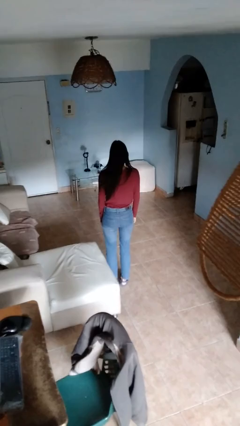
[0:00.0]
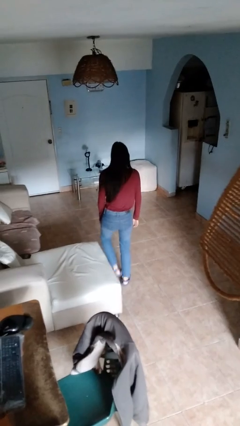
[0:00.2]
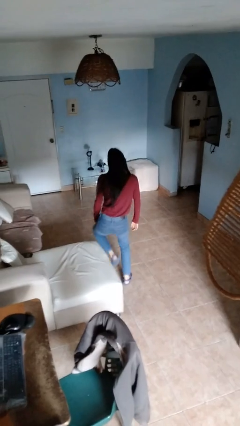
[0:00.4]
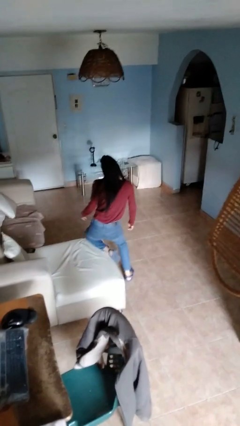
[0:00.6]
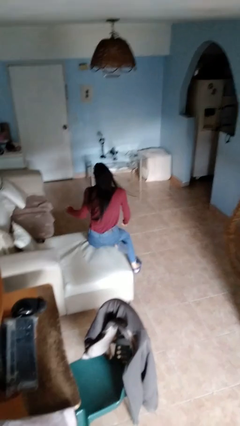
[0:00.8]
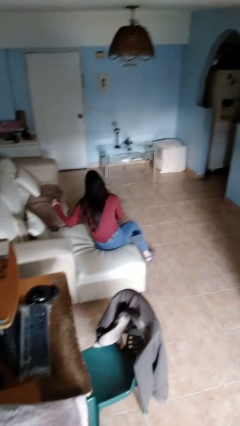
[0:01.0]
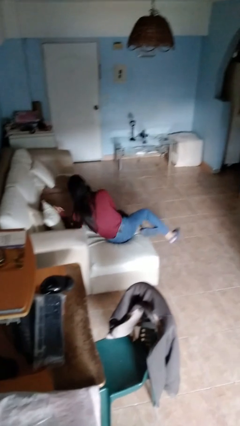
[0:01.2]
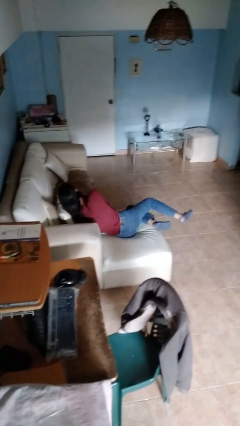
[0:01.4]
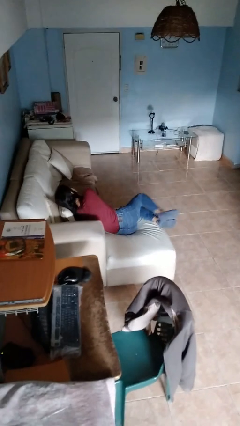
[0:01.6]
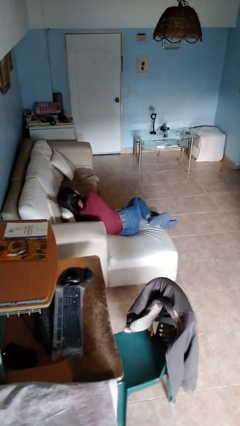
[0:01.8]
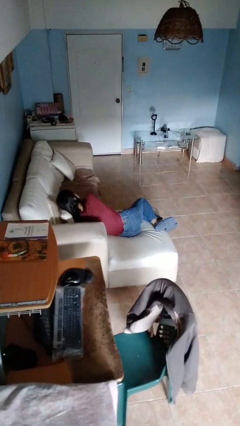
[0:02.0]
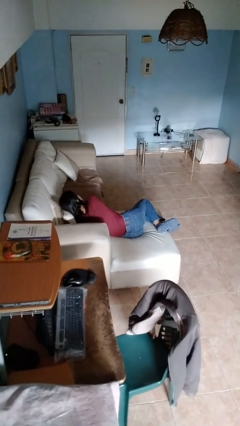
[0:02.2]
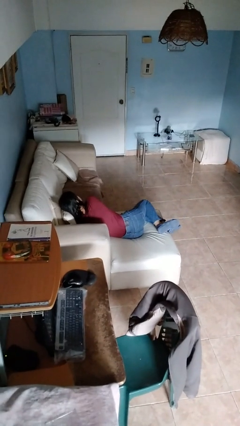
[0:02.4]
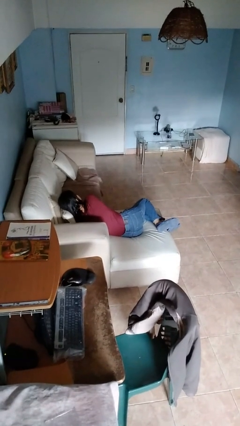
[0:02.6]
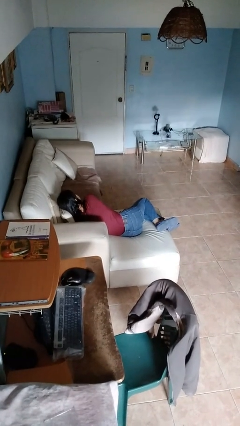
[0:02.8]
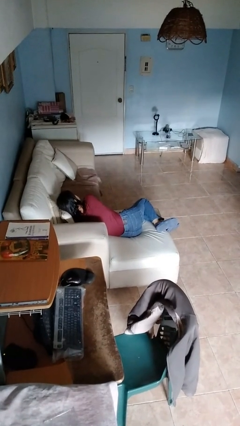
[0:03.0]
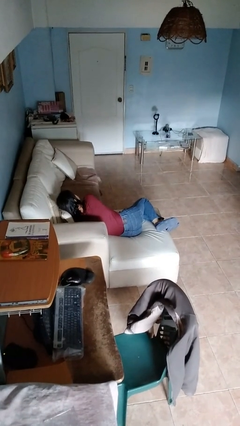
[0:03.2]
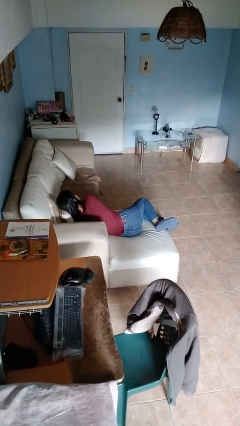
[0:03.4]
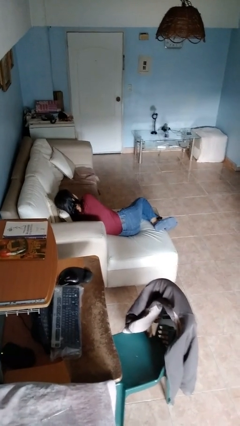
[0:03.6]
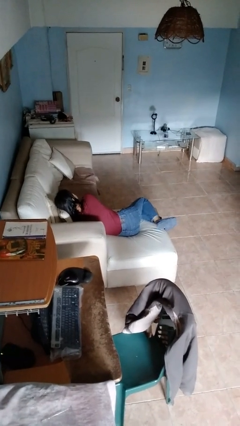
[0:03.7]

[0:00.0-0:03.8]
person lies down on couch

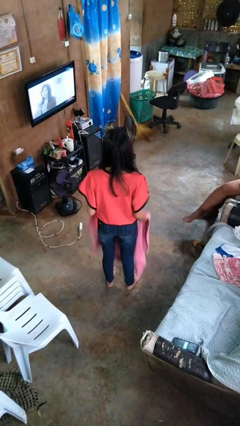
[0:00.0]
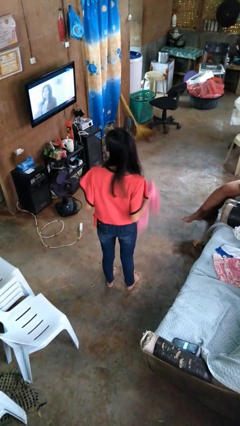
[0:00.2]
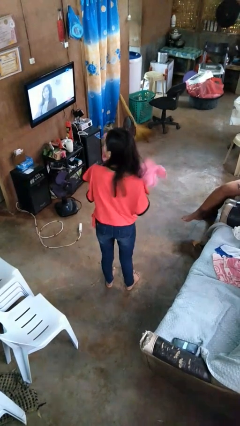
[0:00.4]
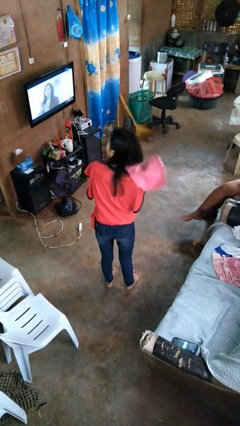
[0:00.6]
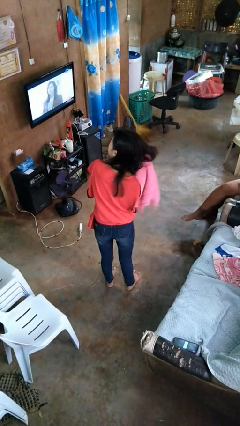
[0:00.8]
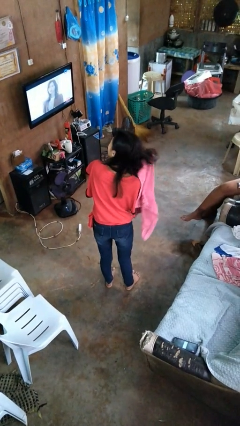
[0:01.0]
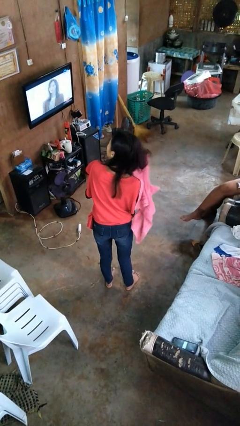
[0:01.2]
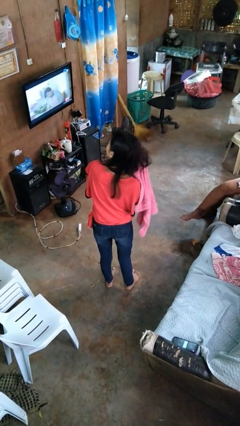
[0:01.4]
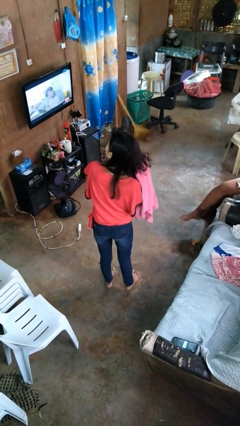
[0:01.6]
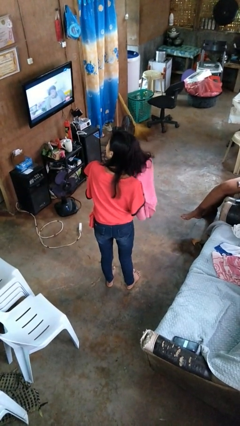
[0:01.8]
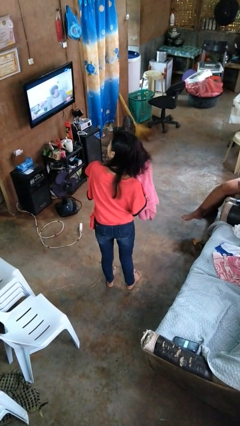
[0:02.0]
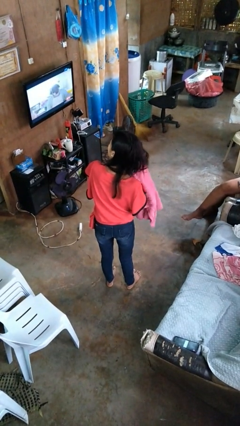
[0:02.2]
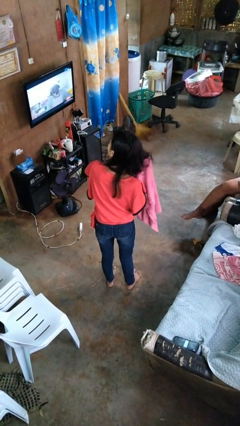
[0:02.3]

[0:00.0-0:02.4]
person dries hair with towel

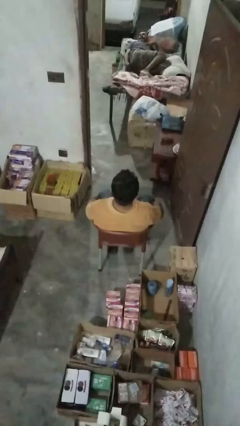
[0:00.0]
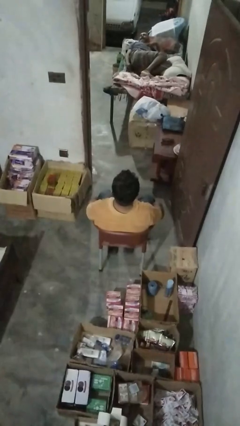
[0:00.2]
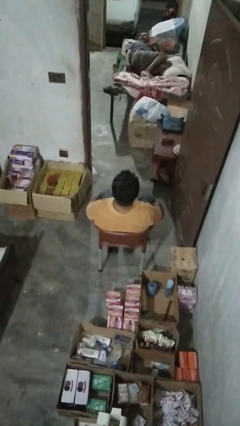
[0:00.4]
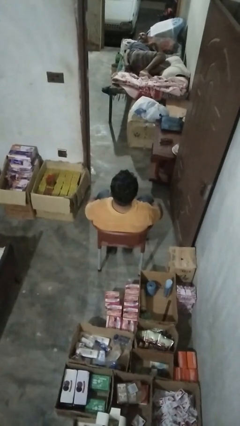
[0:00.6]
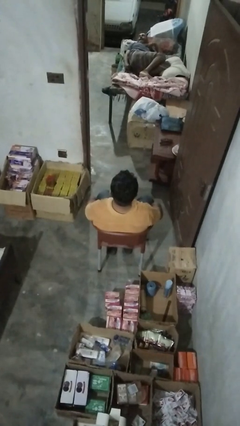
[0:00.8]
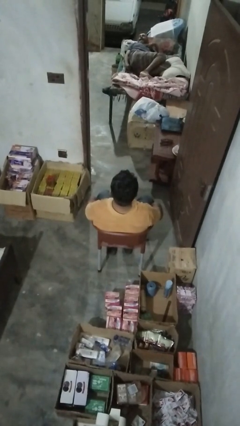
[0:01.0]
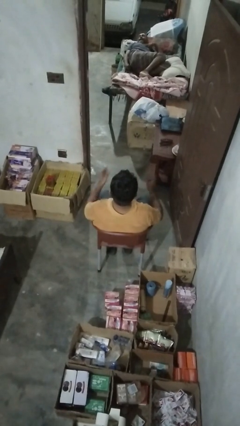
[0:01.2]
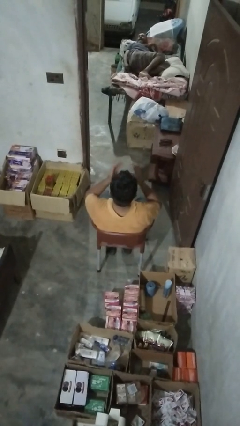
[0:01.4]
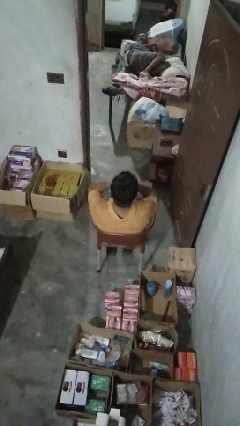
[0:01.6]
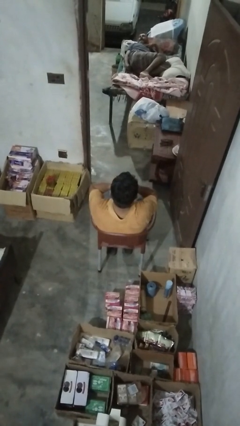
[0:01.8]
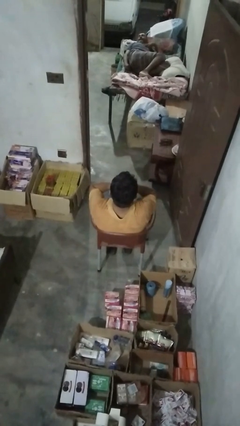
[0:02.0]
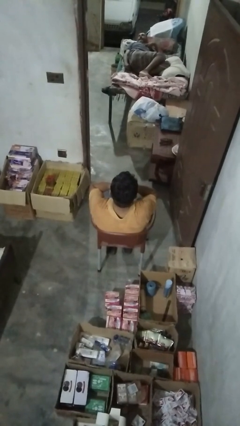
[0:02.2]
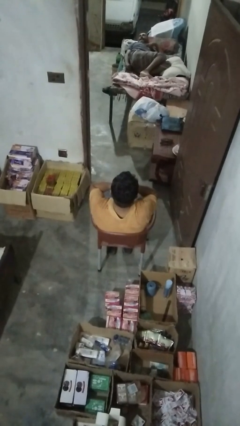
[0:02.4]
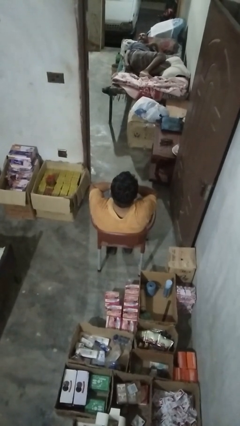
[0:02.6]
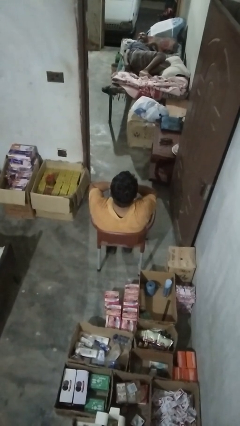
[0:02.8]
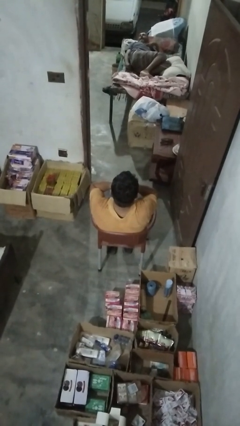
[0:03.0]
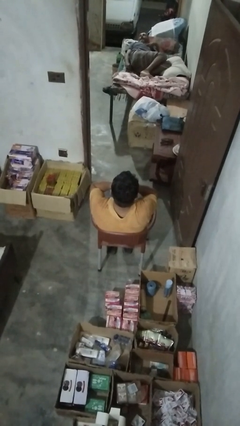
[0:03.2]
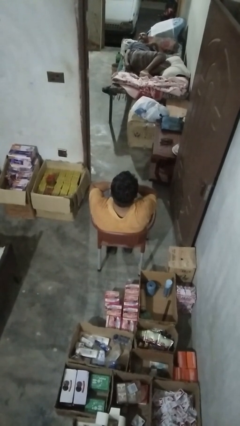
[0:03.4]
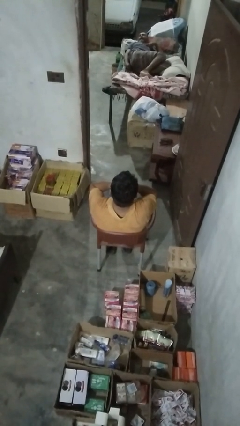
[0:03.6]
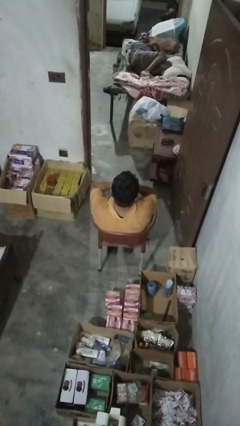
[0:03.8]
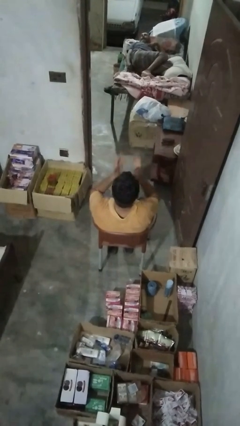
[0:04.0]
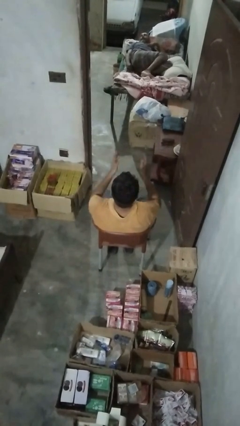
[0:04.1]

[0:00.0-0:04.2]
person covers face with hands

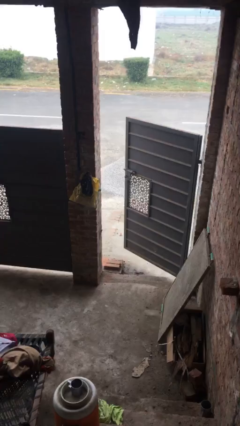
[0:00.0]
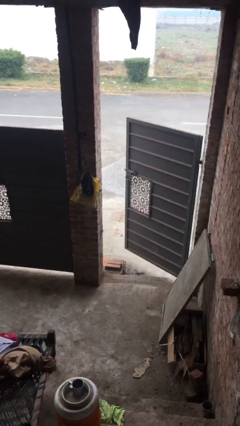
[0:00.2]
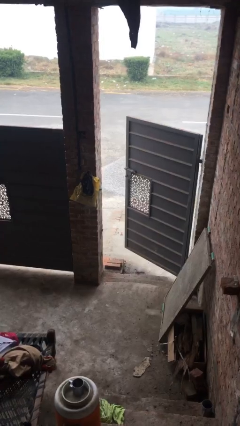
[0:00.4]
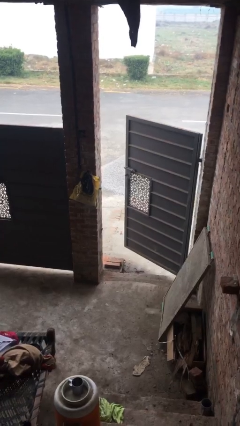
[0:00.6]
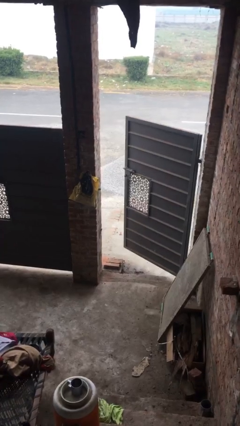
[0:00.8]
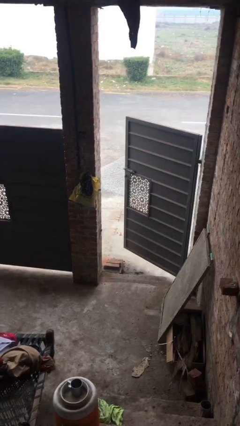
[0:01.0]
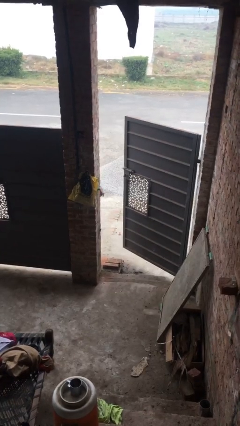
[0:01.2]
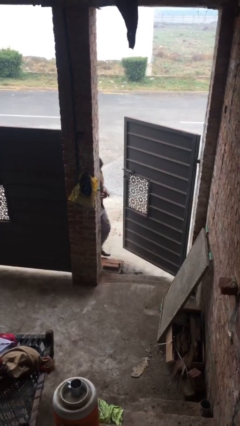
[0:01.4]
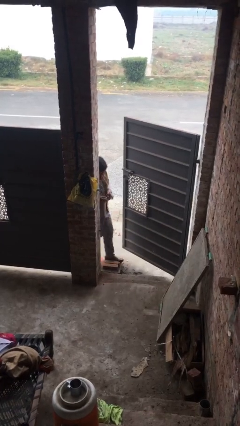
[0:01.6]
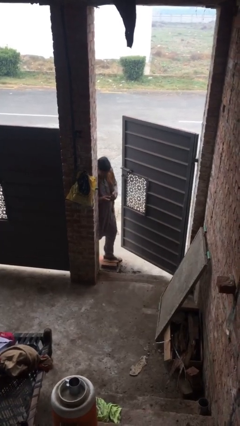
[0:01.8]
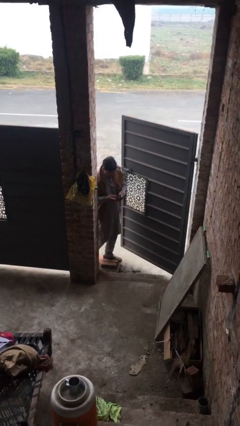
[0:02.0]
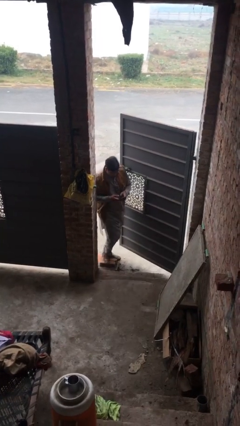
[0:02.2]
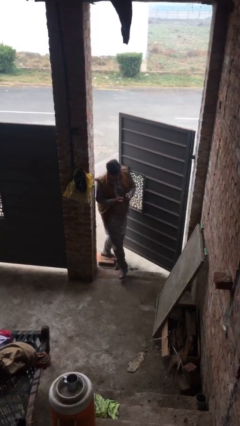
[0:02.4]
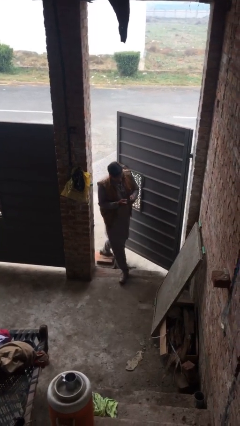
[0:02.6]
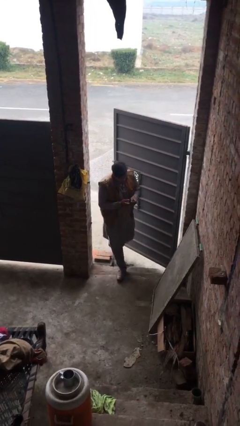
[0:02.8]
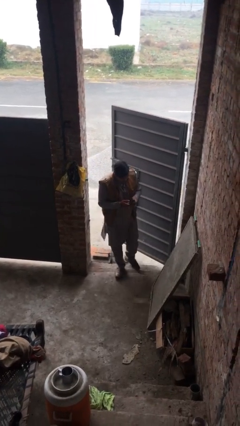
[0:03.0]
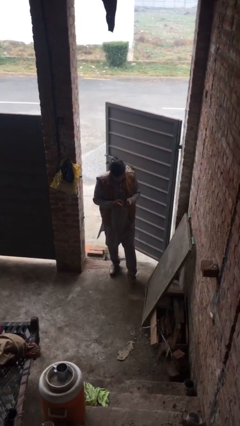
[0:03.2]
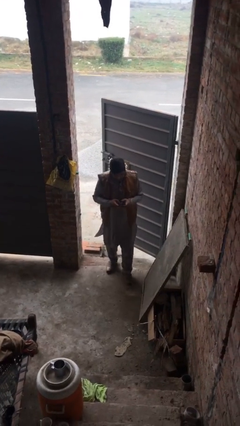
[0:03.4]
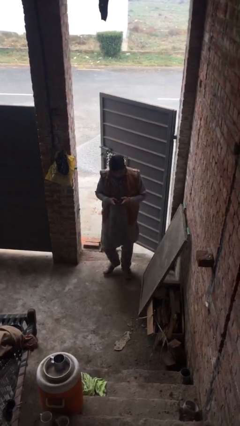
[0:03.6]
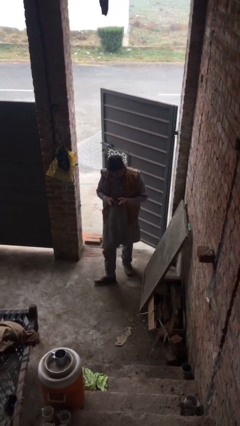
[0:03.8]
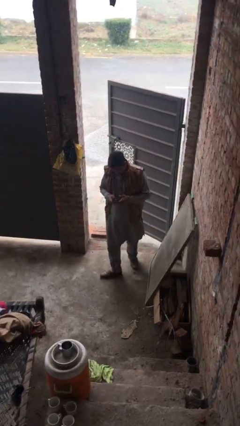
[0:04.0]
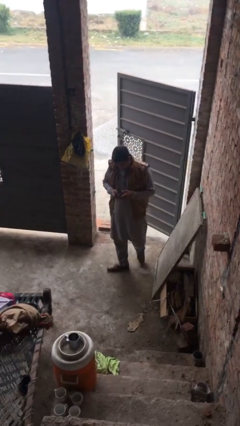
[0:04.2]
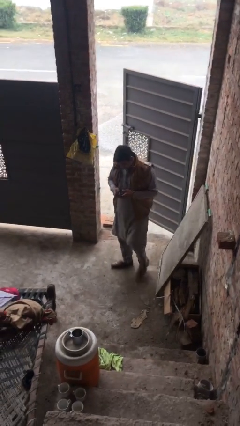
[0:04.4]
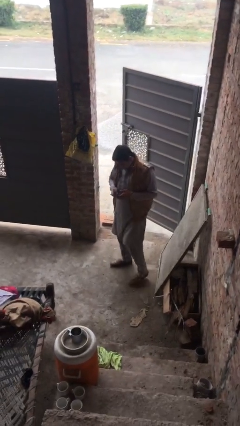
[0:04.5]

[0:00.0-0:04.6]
person enters scene through structure

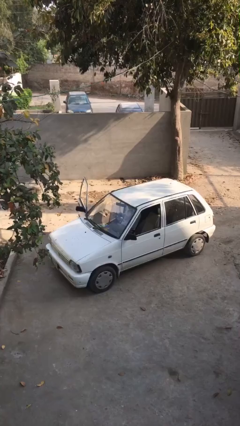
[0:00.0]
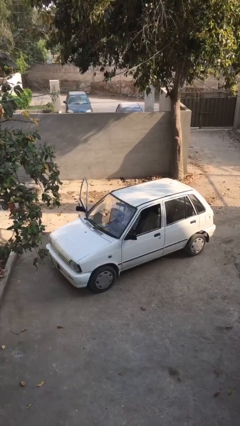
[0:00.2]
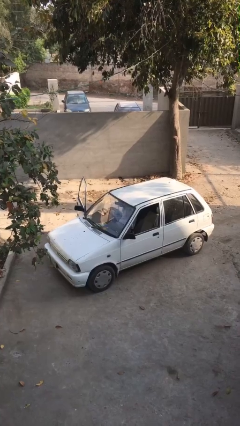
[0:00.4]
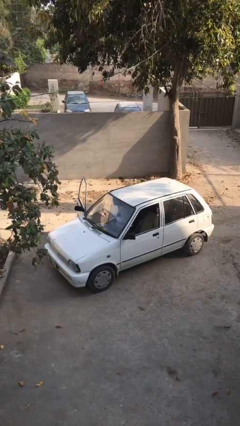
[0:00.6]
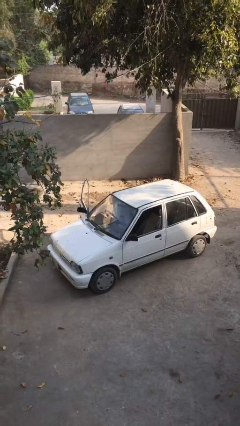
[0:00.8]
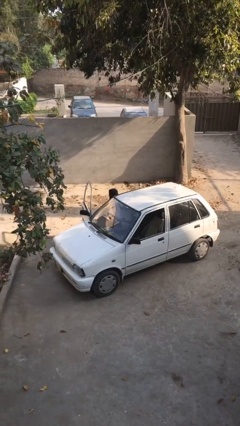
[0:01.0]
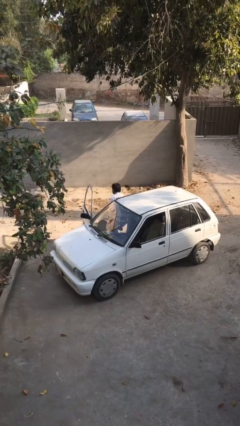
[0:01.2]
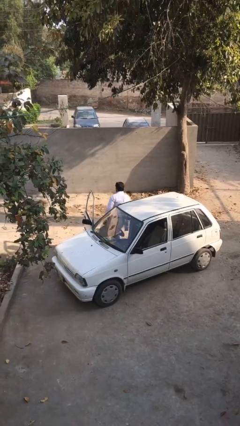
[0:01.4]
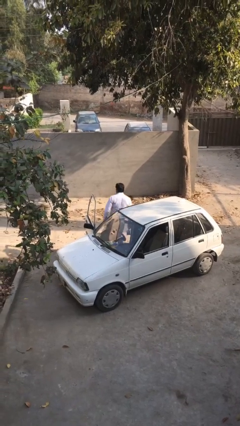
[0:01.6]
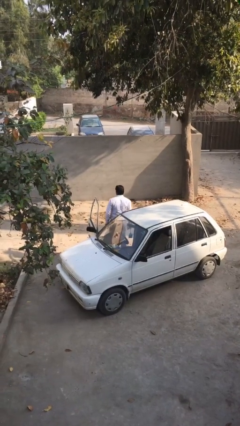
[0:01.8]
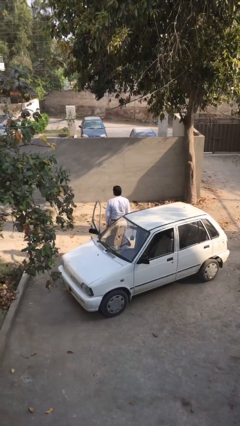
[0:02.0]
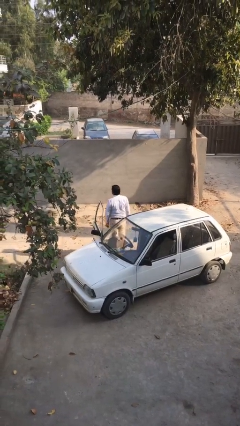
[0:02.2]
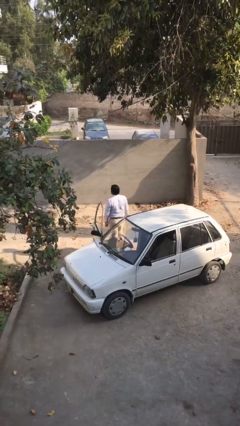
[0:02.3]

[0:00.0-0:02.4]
person exits car
